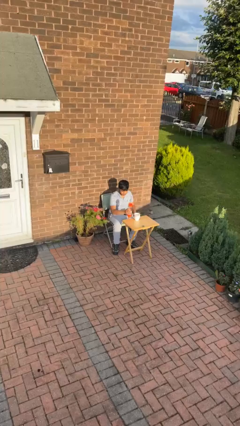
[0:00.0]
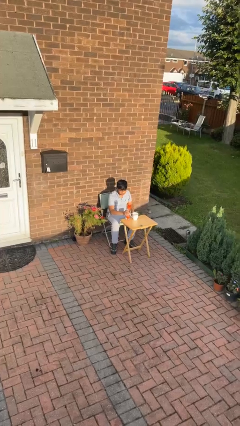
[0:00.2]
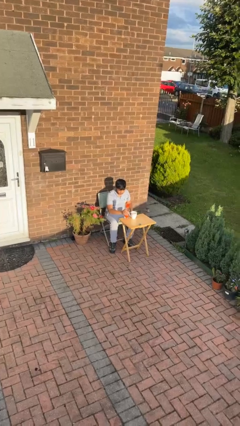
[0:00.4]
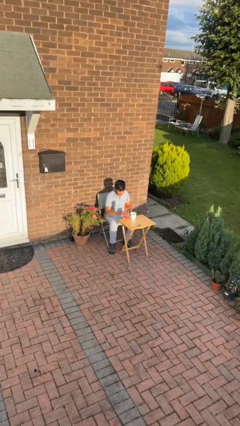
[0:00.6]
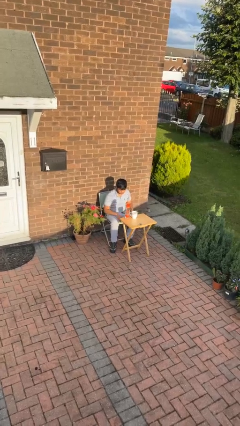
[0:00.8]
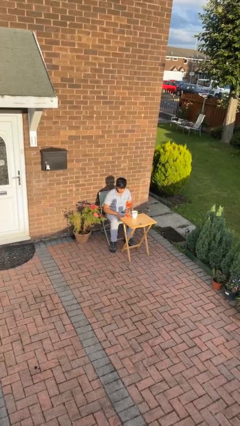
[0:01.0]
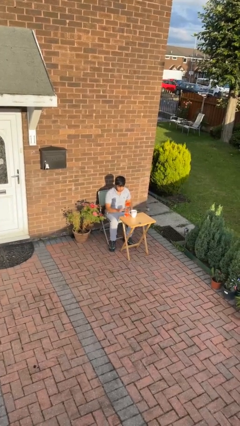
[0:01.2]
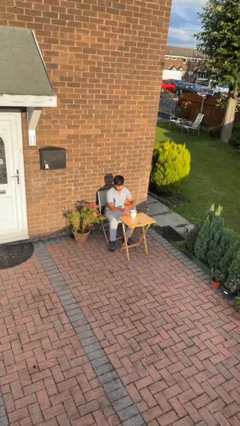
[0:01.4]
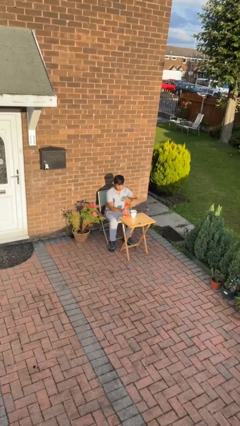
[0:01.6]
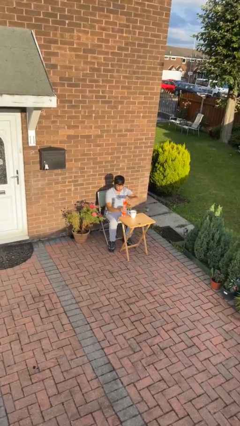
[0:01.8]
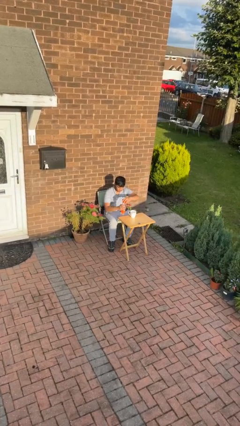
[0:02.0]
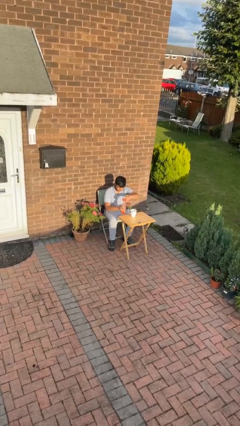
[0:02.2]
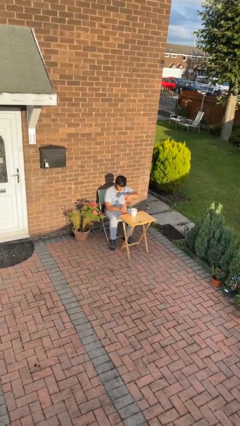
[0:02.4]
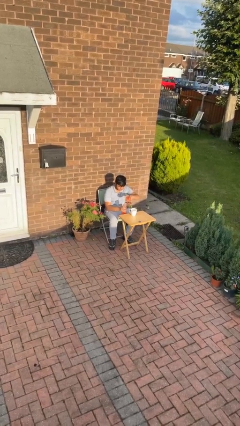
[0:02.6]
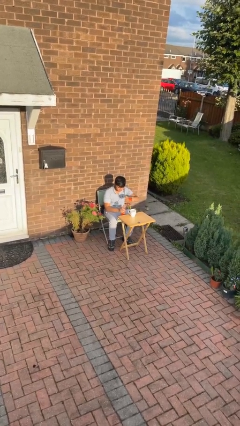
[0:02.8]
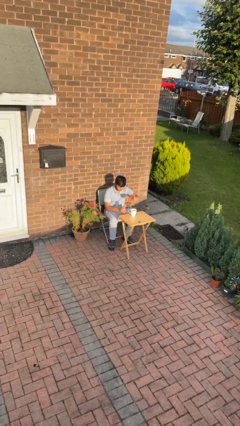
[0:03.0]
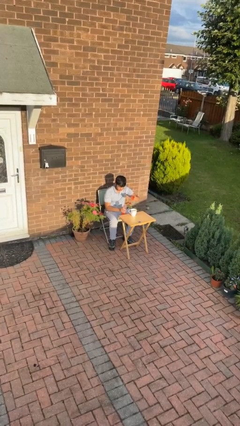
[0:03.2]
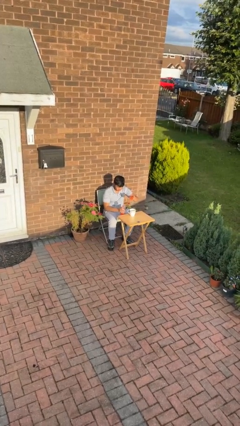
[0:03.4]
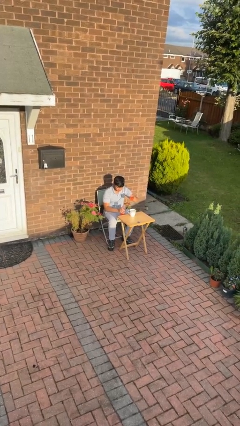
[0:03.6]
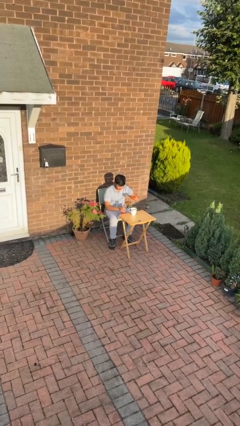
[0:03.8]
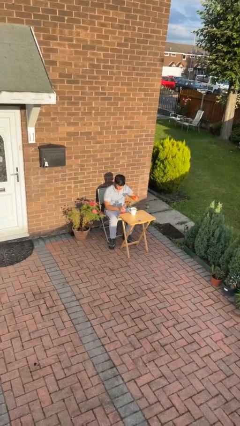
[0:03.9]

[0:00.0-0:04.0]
person unscrews lid from bottle

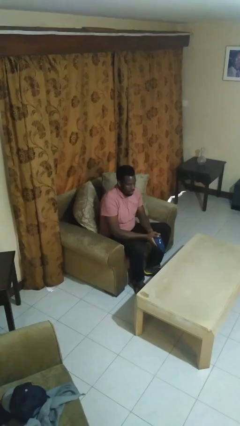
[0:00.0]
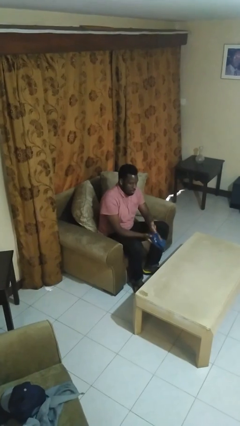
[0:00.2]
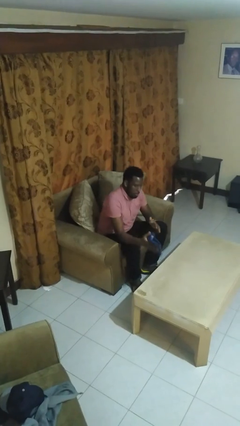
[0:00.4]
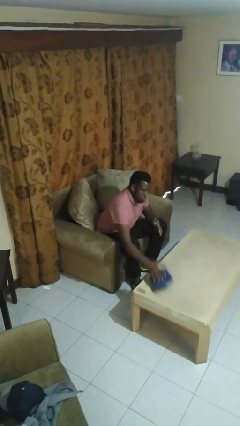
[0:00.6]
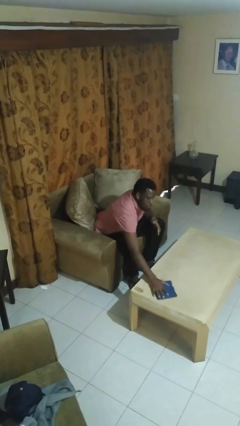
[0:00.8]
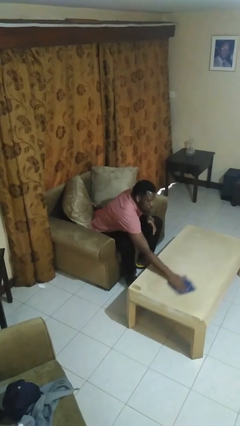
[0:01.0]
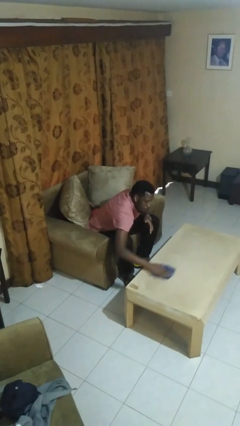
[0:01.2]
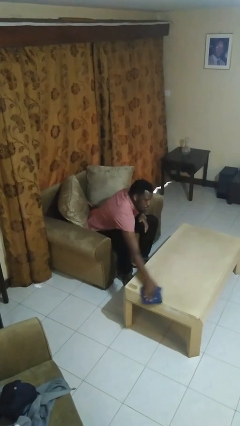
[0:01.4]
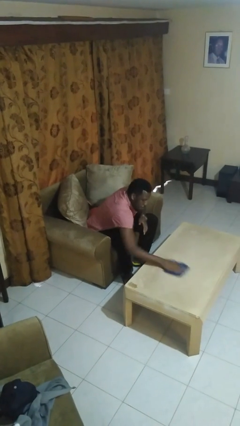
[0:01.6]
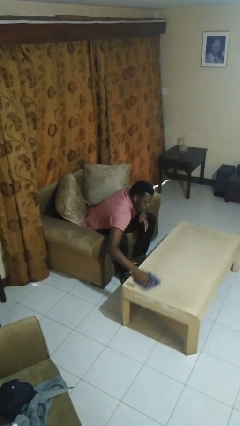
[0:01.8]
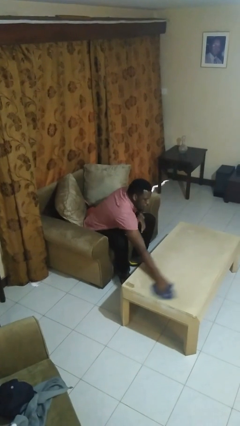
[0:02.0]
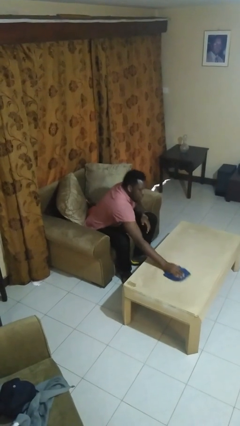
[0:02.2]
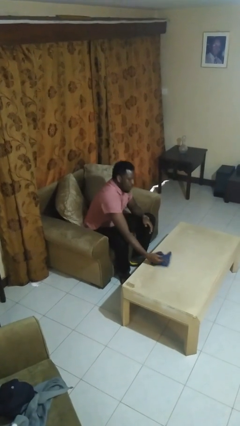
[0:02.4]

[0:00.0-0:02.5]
person cleans table with rag

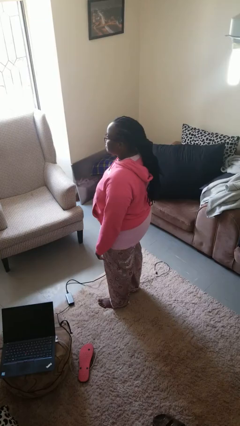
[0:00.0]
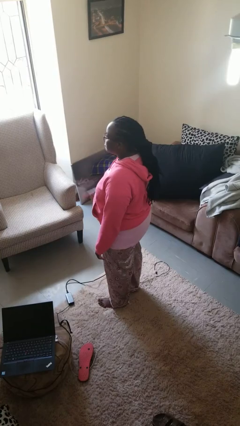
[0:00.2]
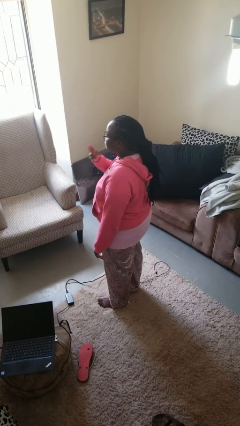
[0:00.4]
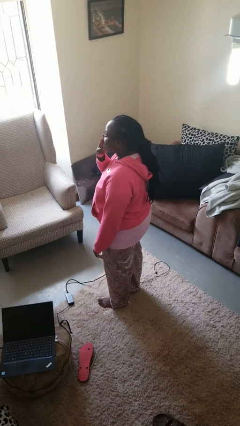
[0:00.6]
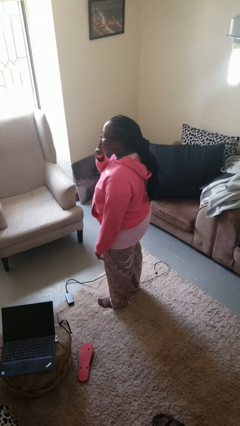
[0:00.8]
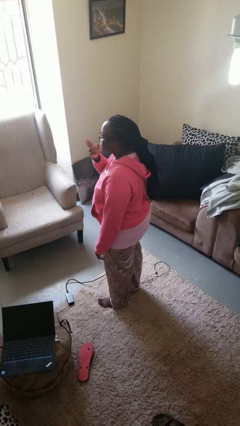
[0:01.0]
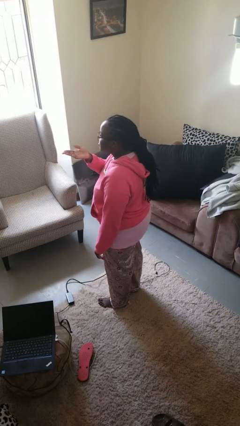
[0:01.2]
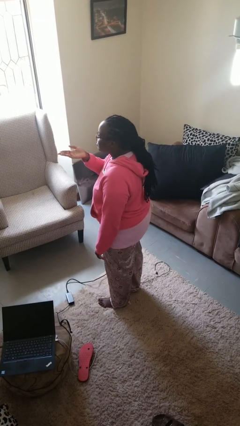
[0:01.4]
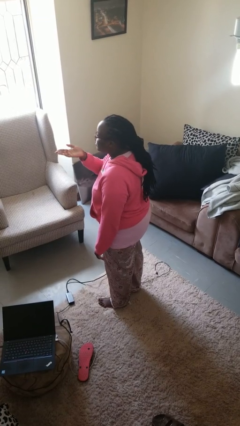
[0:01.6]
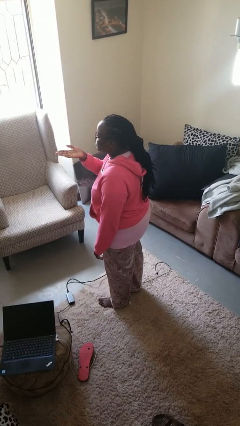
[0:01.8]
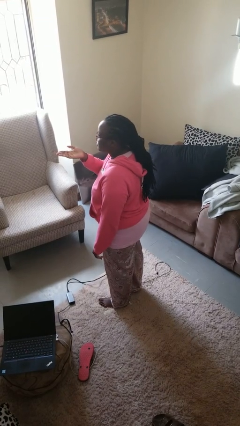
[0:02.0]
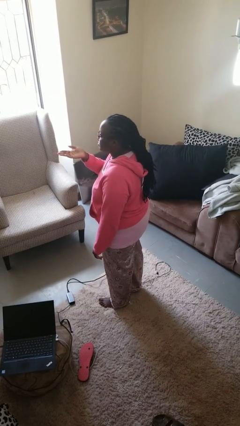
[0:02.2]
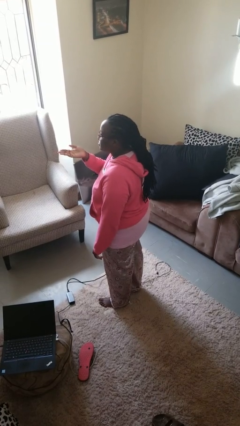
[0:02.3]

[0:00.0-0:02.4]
person gestures blow kiss

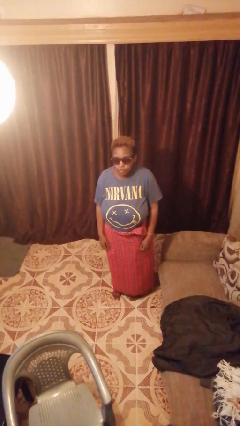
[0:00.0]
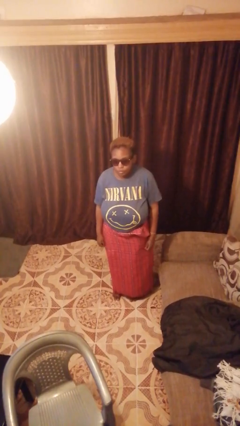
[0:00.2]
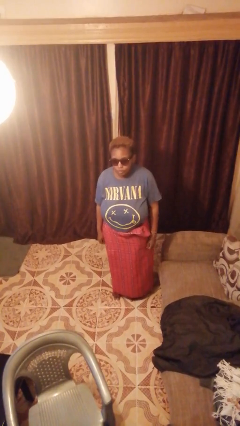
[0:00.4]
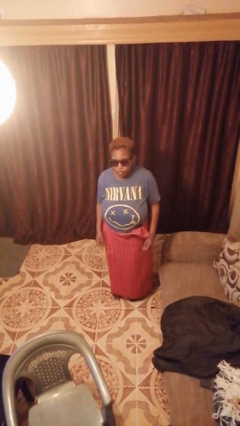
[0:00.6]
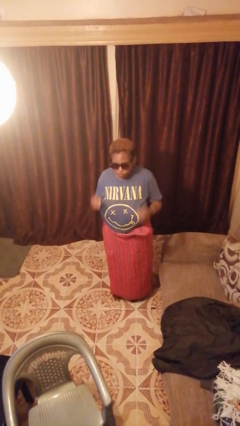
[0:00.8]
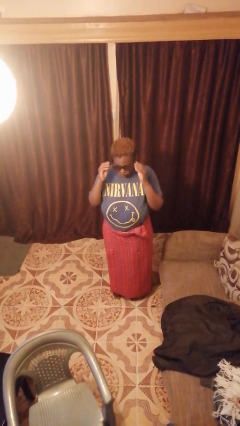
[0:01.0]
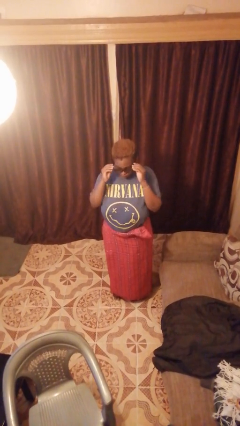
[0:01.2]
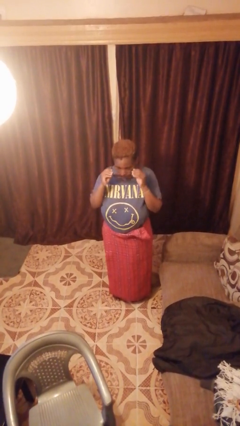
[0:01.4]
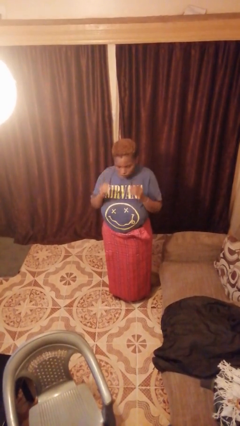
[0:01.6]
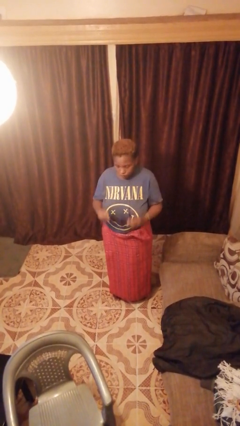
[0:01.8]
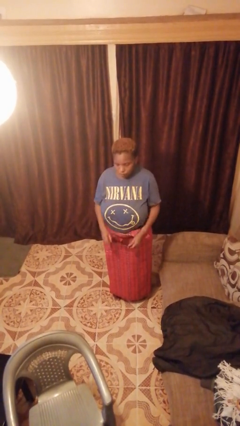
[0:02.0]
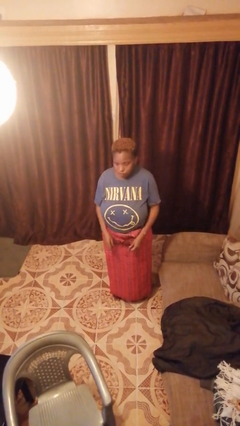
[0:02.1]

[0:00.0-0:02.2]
person takes off sunglasses

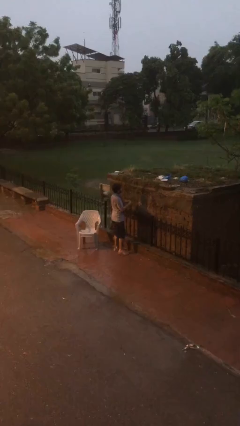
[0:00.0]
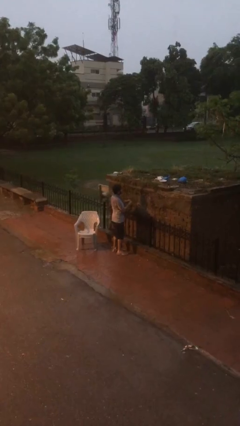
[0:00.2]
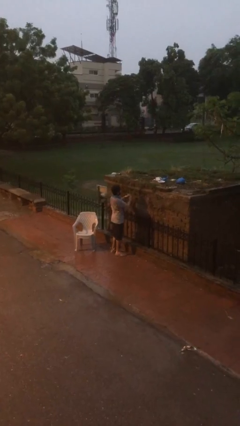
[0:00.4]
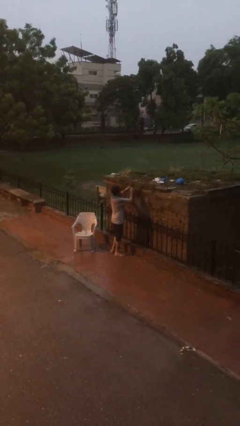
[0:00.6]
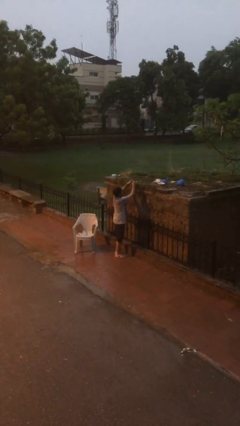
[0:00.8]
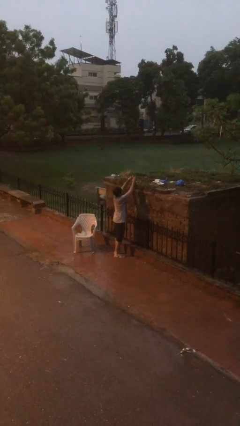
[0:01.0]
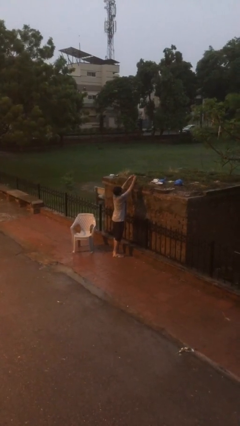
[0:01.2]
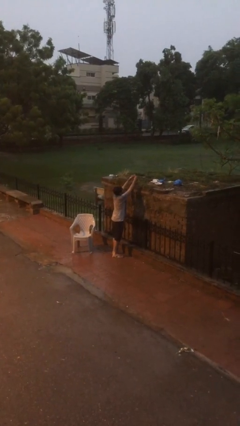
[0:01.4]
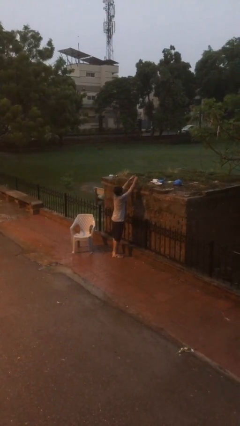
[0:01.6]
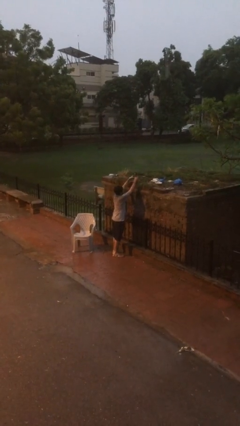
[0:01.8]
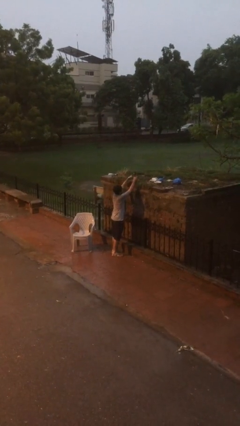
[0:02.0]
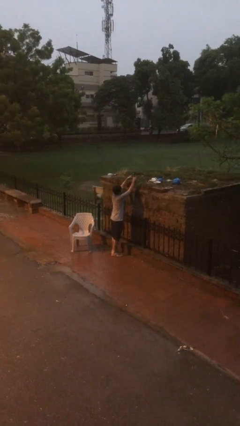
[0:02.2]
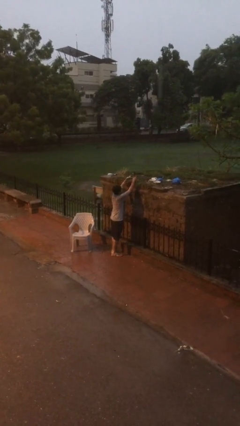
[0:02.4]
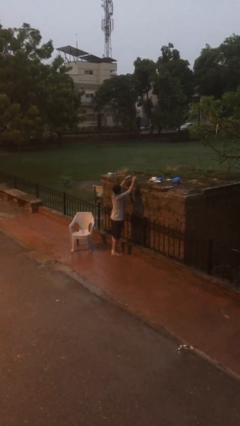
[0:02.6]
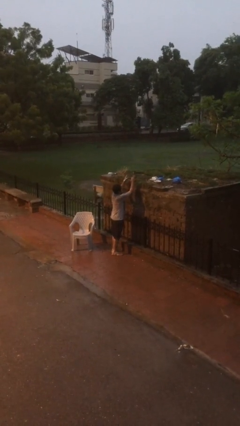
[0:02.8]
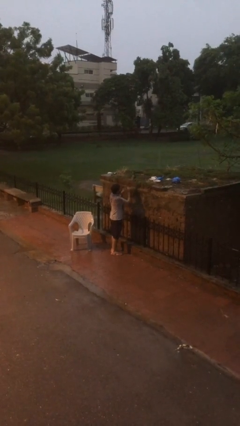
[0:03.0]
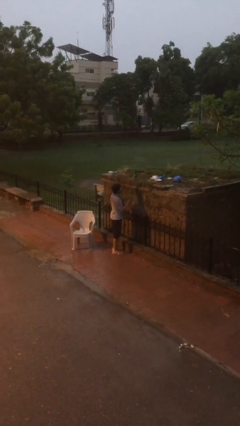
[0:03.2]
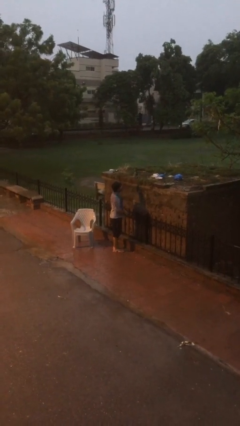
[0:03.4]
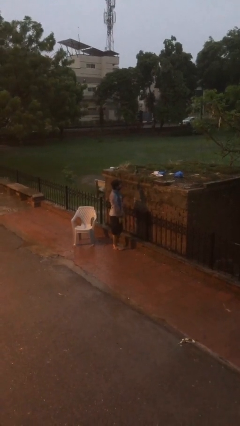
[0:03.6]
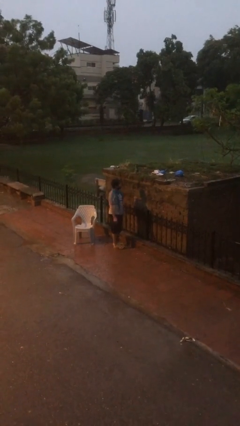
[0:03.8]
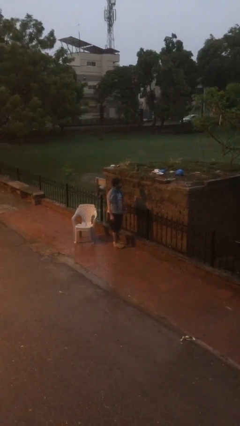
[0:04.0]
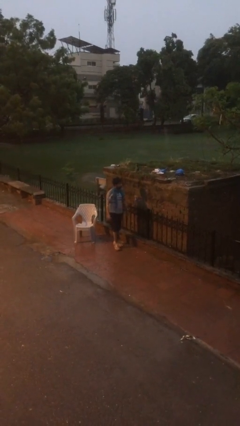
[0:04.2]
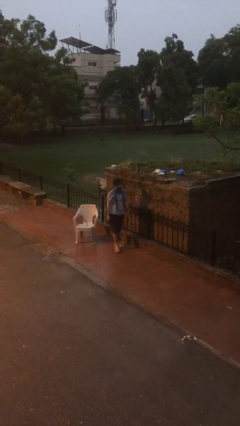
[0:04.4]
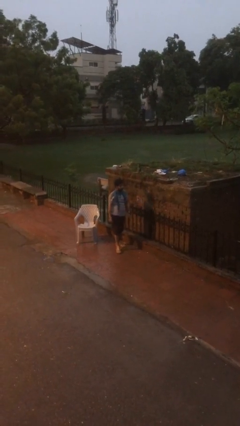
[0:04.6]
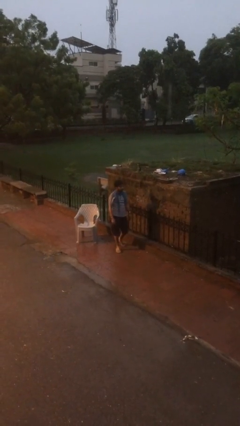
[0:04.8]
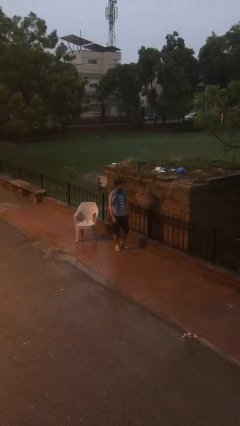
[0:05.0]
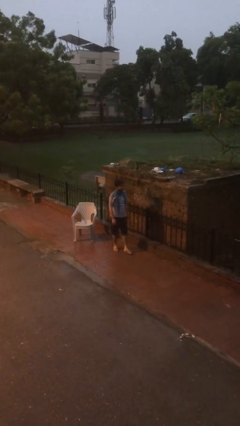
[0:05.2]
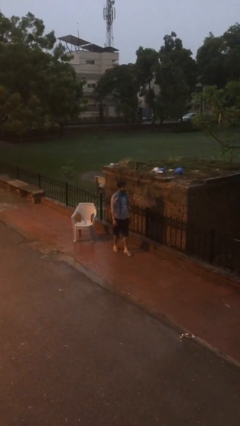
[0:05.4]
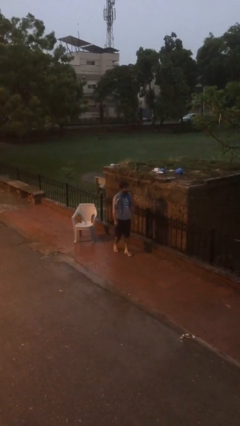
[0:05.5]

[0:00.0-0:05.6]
person puts down object on shelf

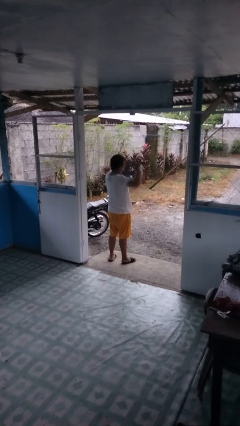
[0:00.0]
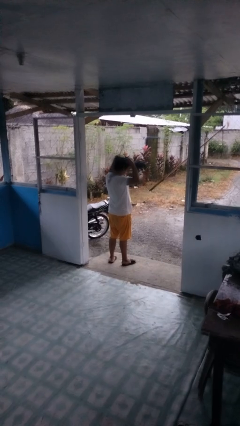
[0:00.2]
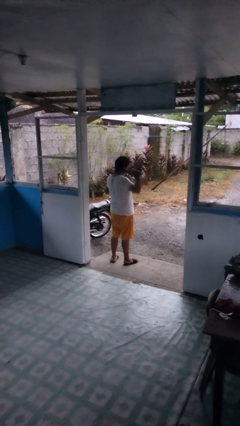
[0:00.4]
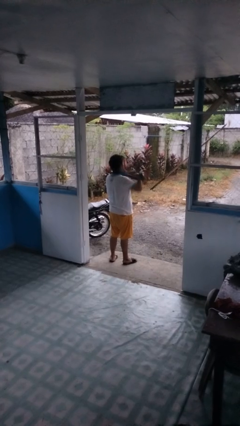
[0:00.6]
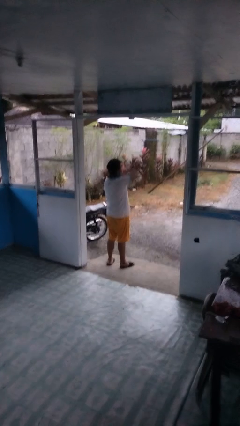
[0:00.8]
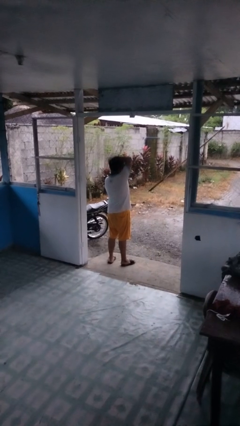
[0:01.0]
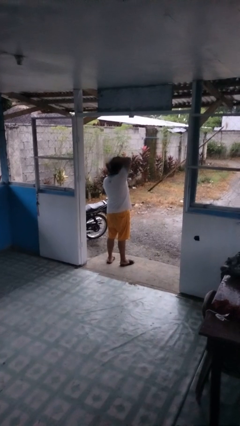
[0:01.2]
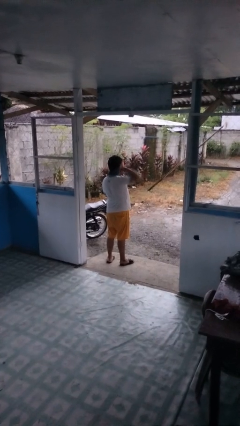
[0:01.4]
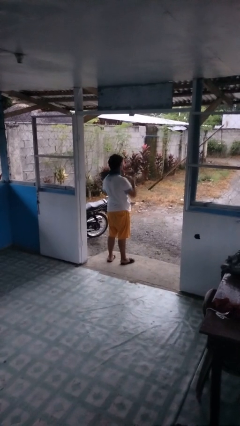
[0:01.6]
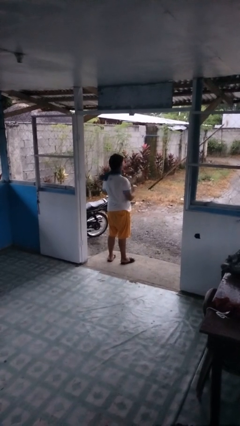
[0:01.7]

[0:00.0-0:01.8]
person puts on scarf
